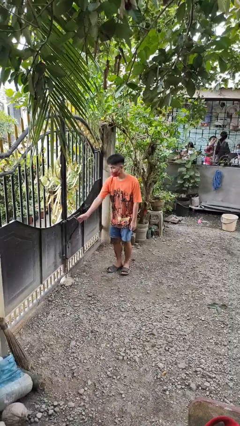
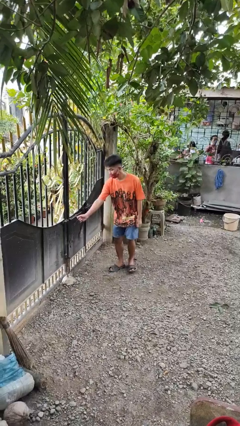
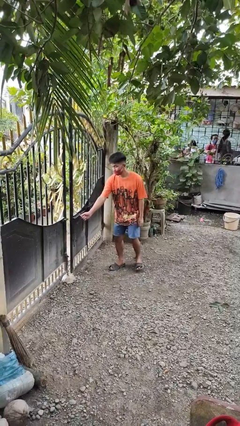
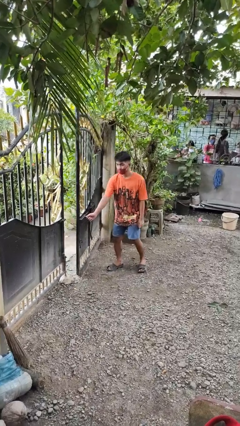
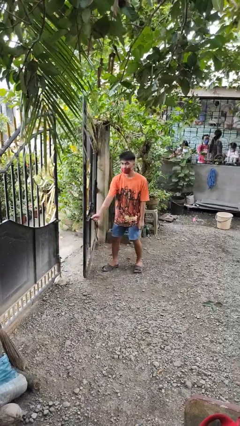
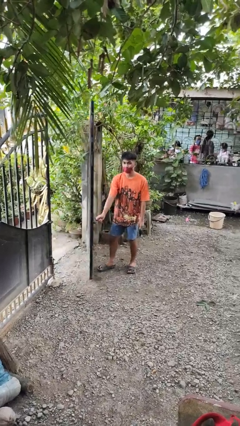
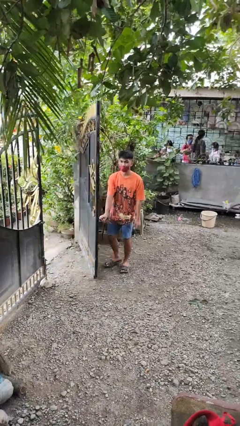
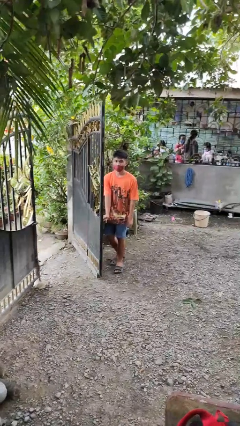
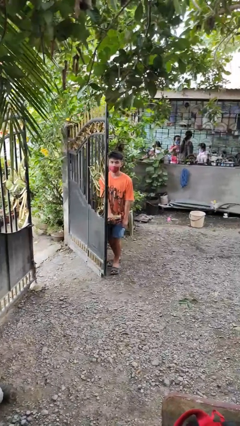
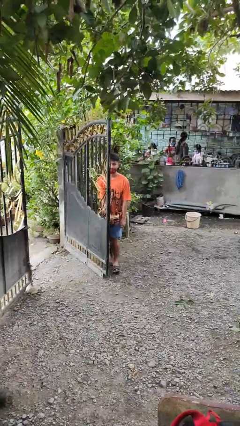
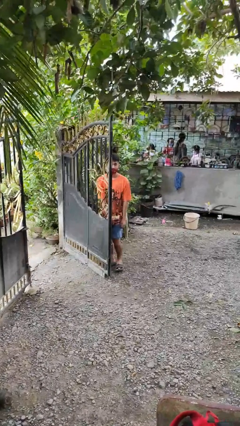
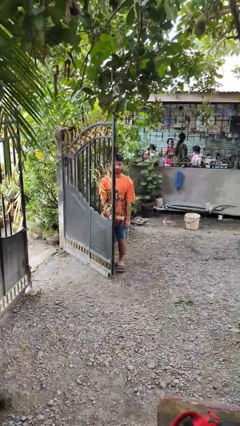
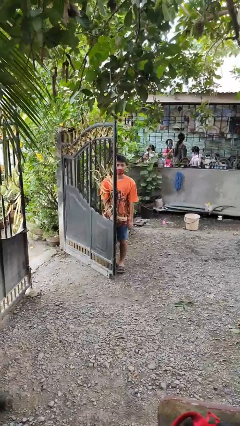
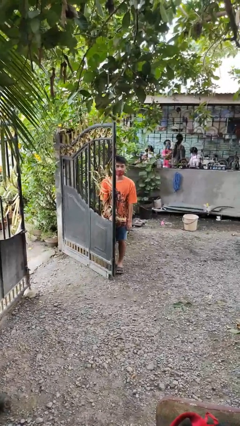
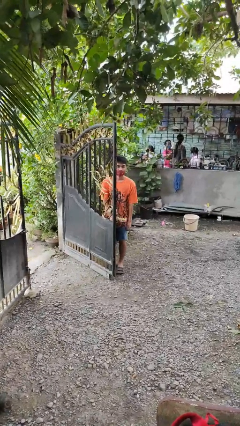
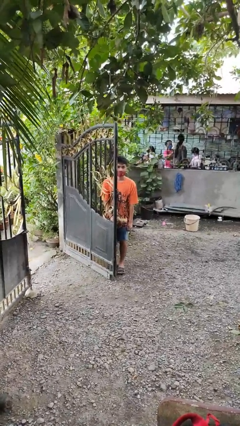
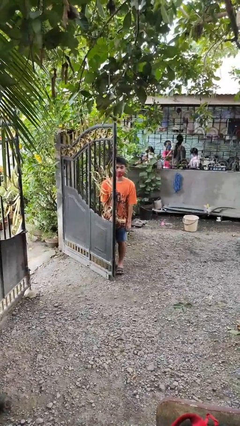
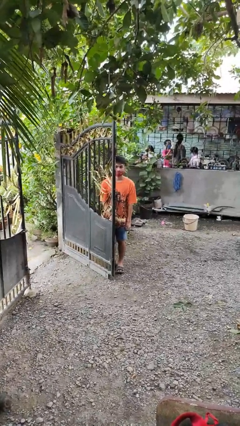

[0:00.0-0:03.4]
person opens gate

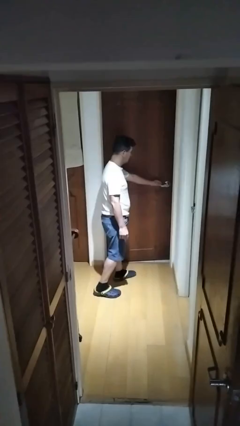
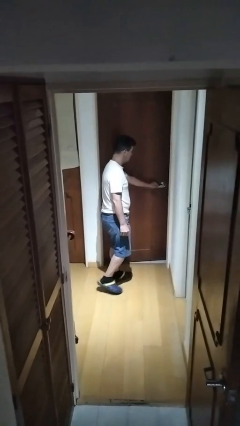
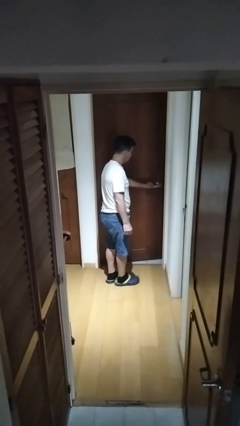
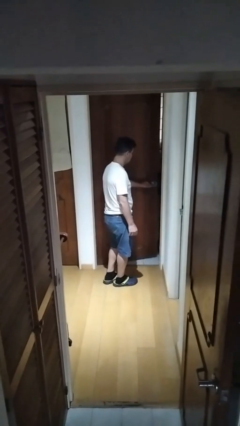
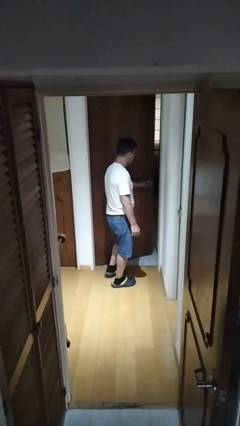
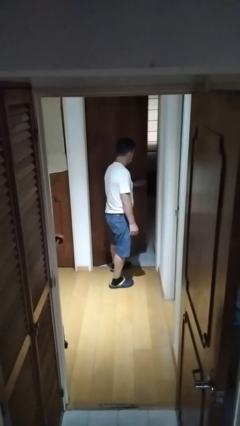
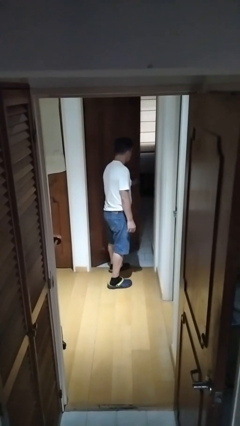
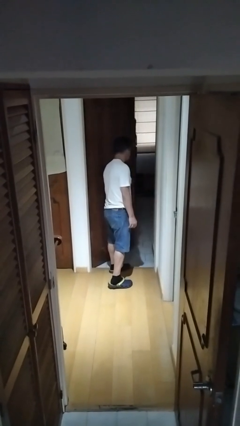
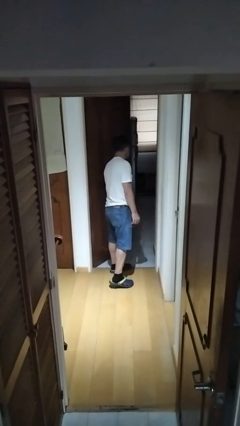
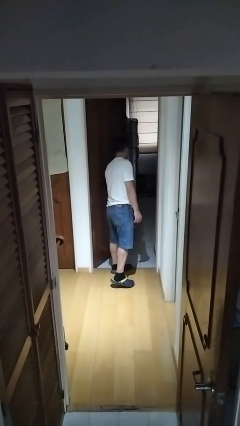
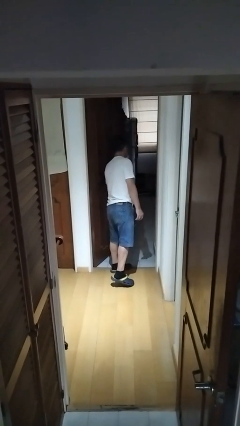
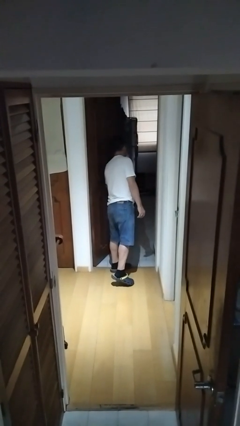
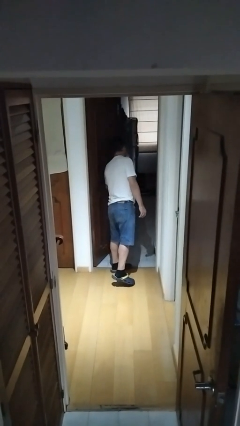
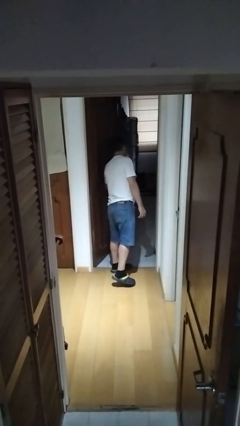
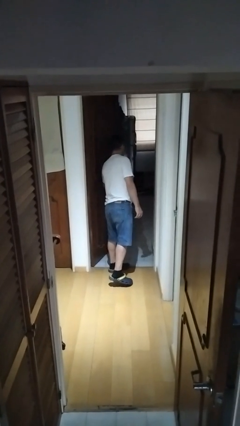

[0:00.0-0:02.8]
person opens facility door

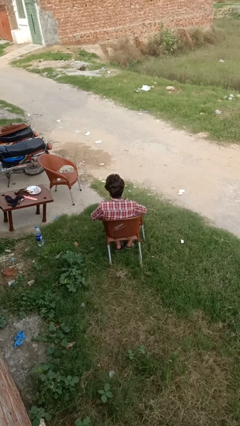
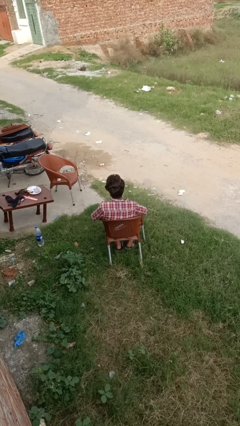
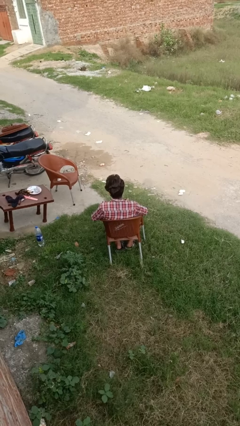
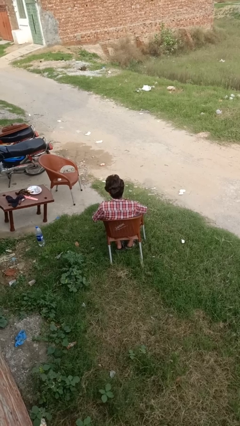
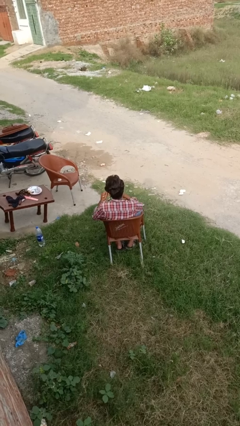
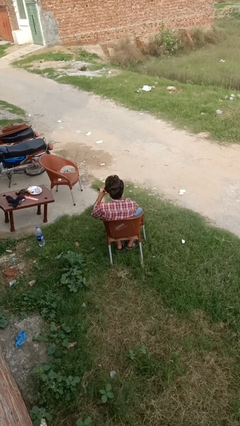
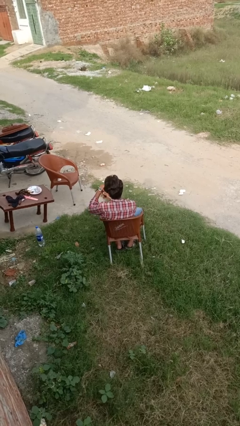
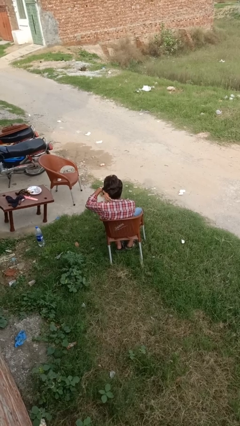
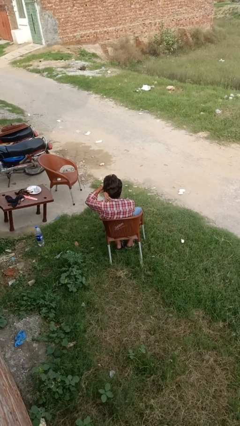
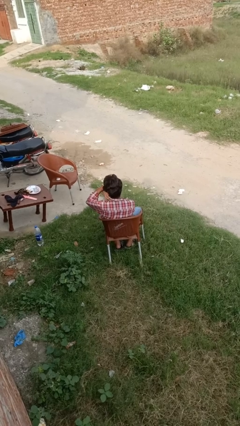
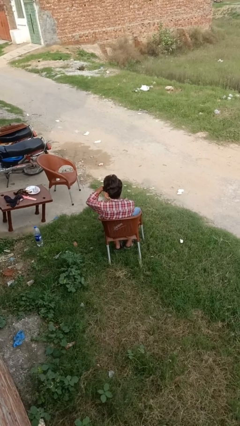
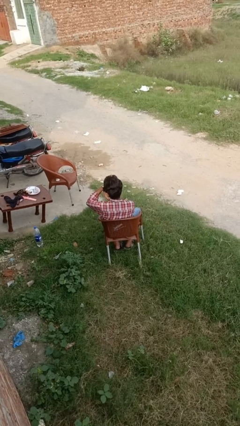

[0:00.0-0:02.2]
person puts on wristwatch

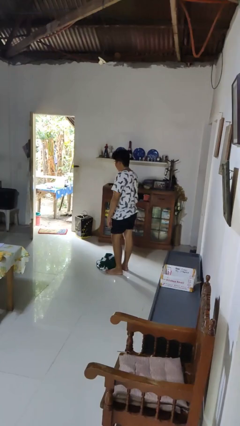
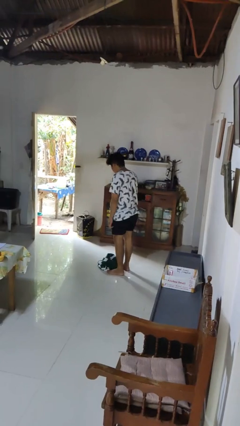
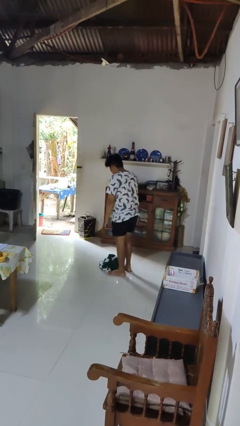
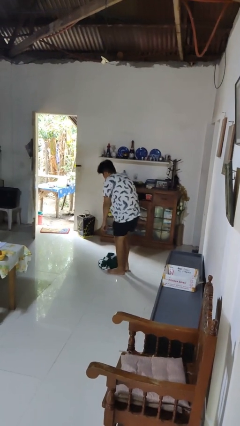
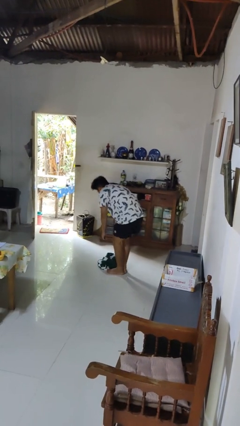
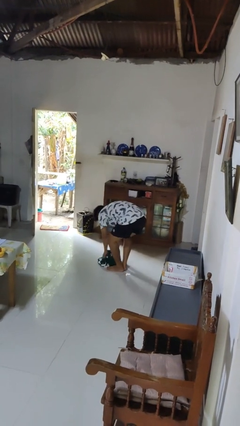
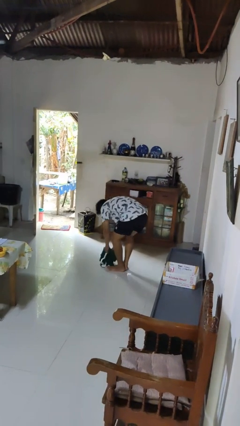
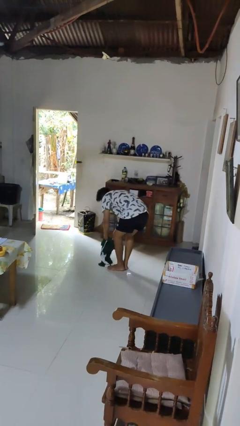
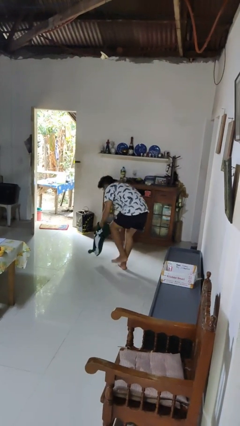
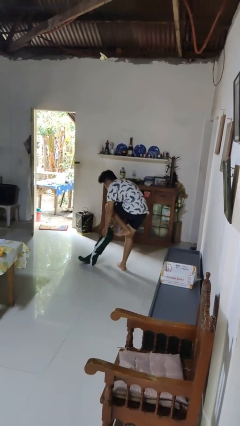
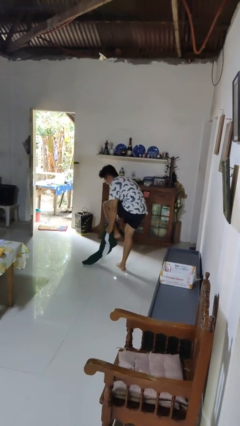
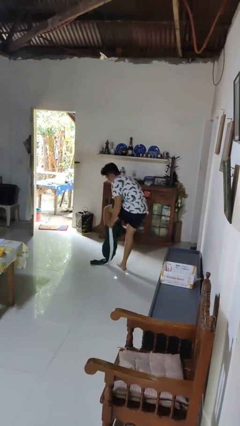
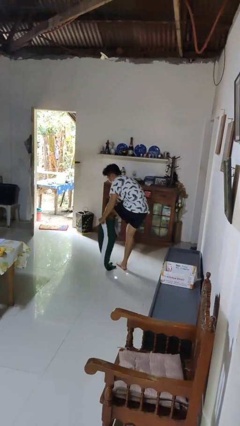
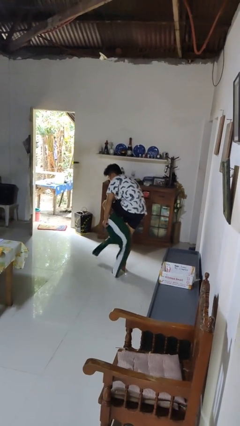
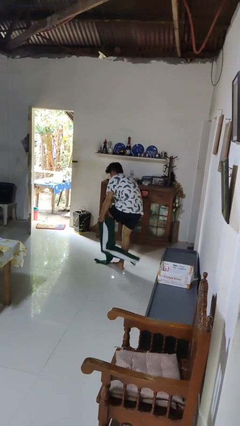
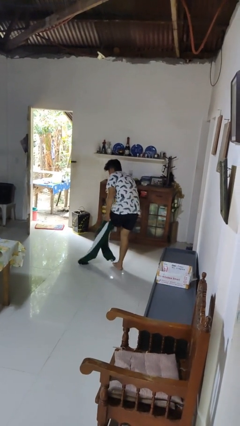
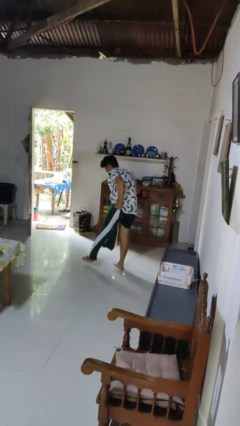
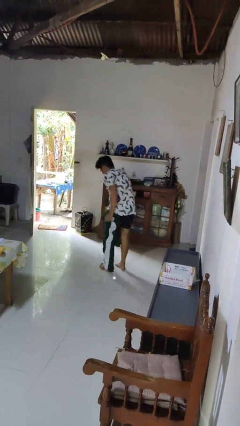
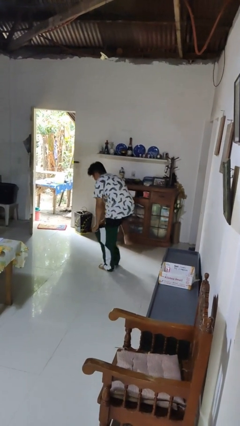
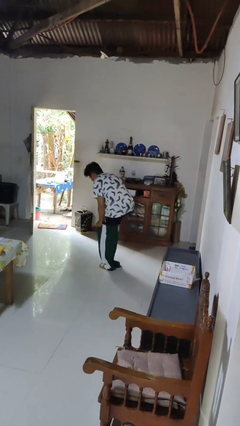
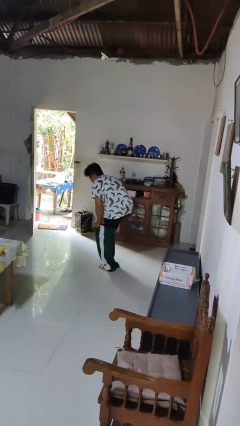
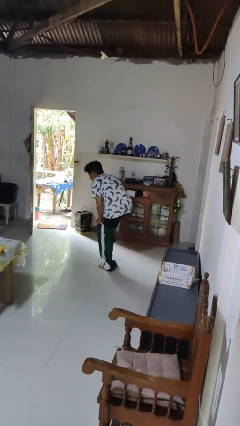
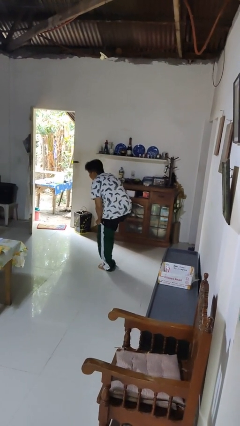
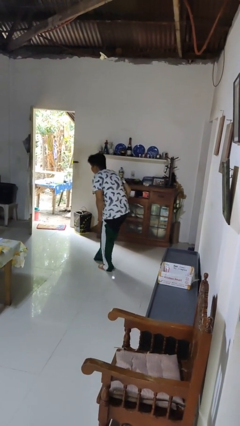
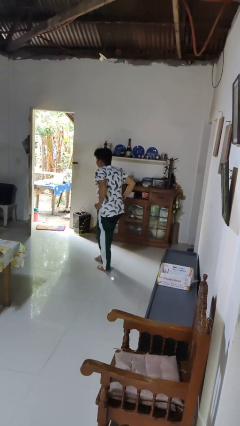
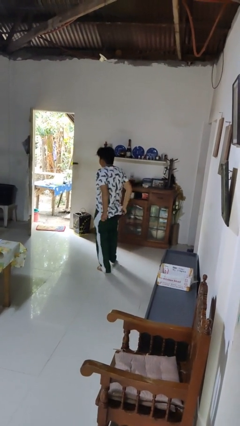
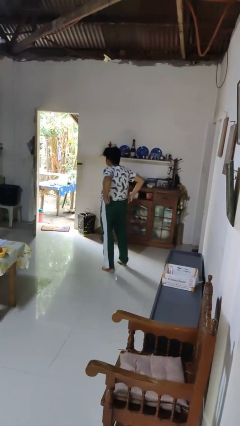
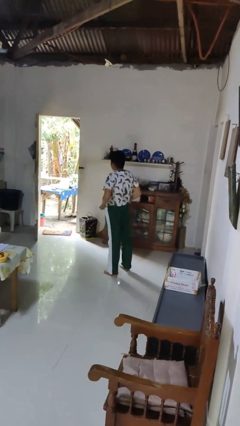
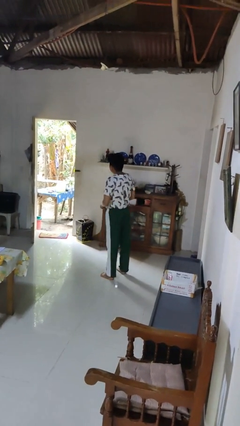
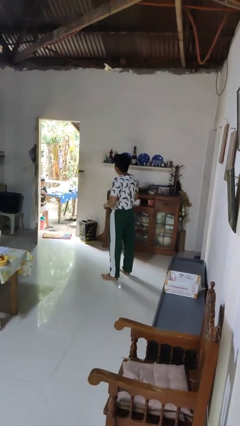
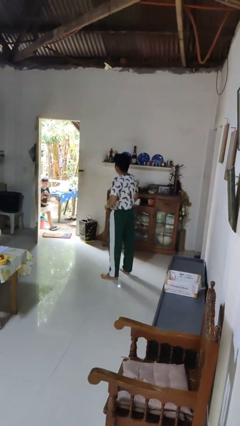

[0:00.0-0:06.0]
person puts on pants

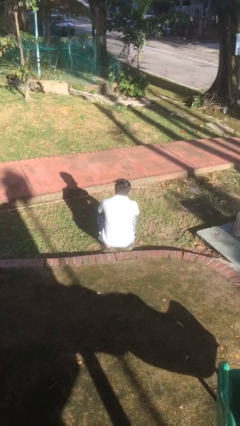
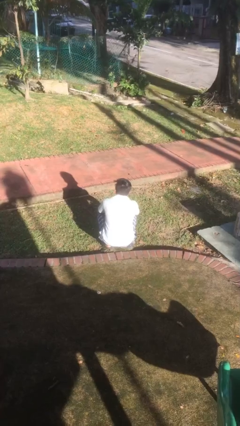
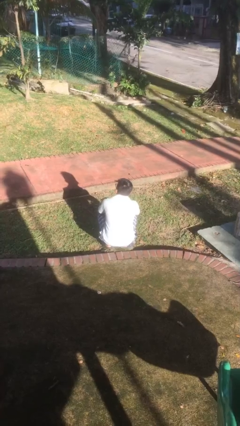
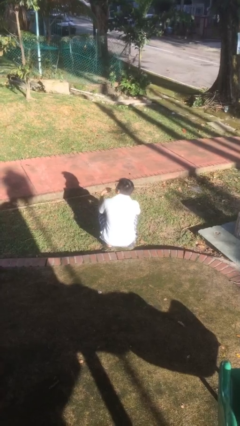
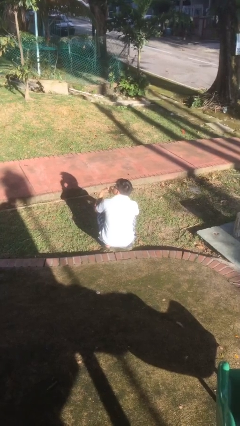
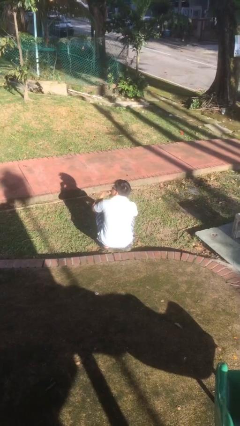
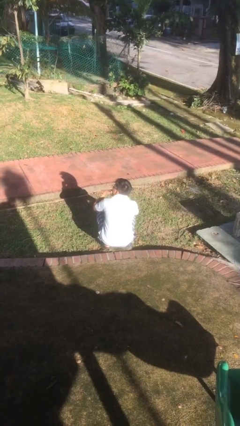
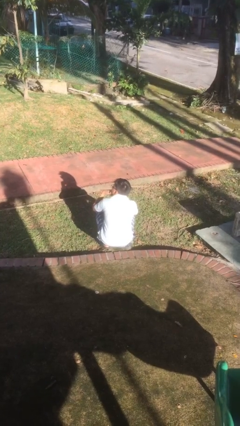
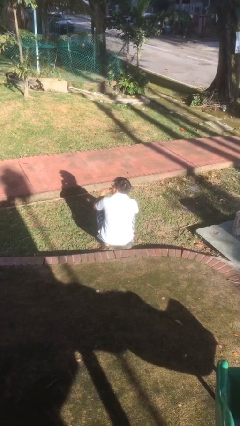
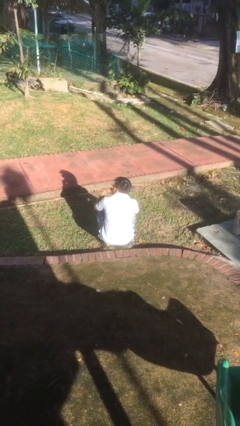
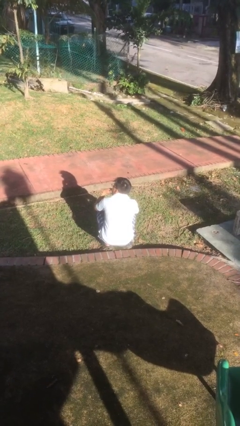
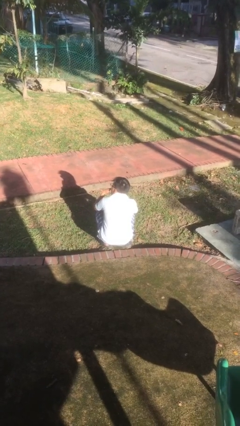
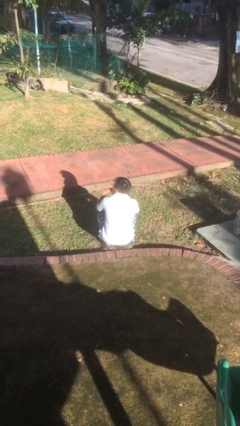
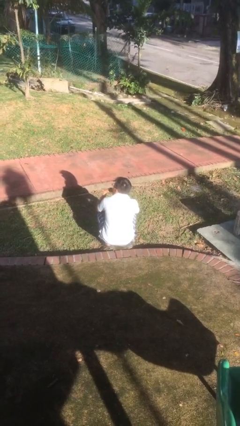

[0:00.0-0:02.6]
person strokes chin

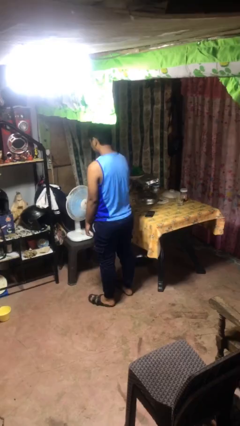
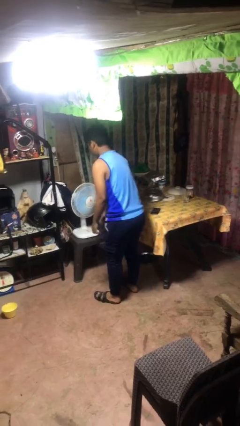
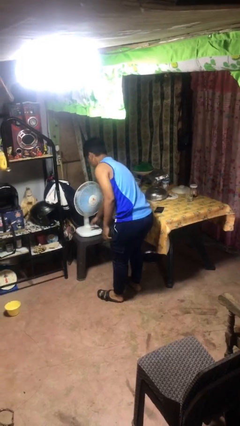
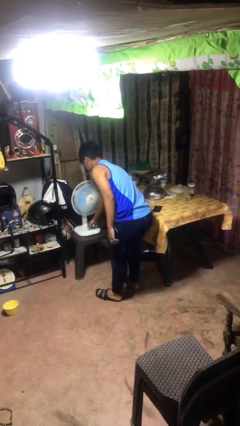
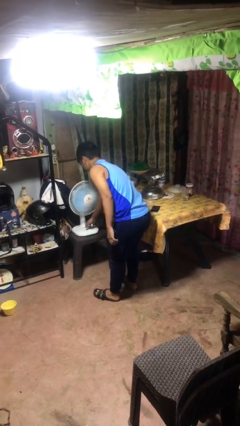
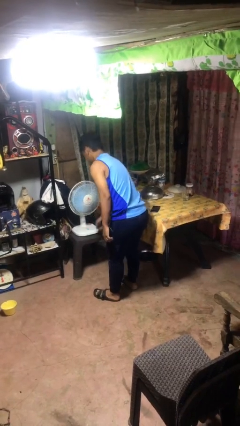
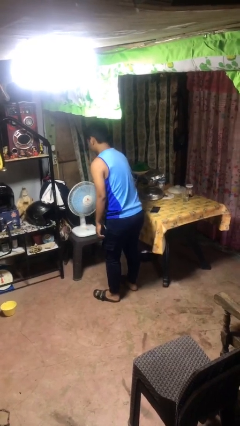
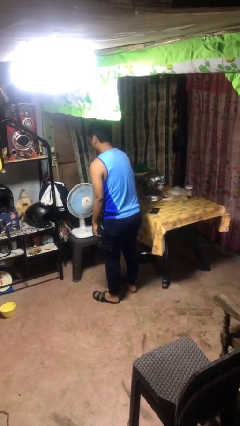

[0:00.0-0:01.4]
person turns off fan
